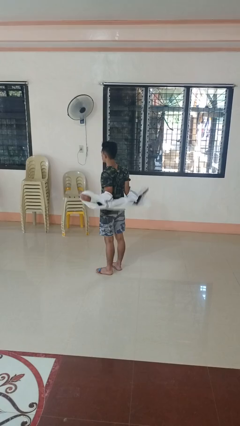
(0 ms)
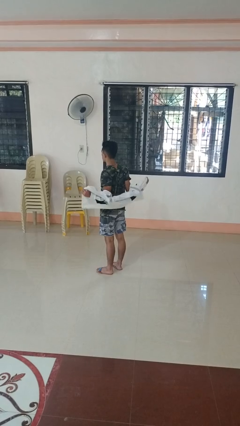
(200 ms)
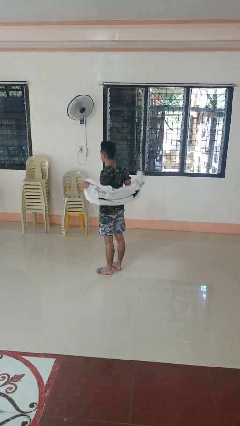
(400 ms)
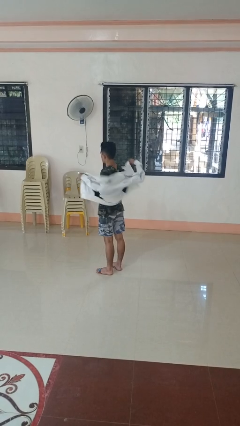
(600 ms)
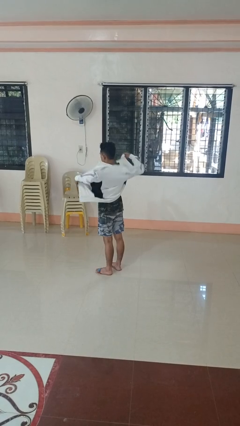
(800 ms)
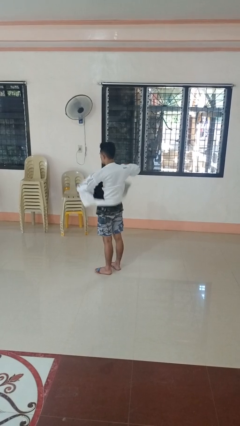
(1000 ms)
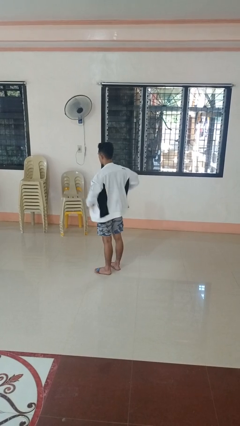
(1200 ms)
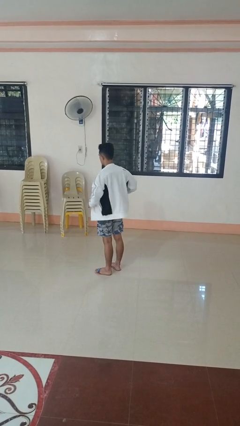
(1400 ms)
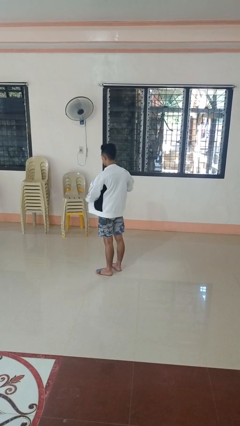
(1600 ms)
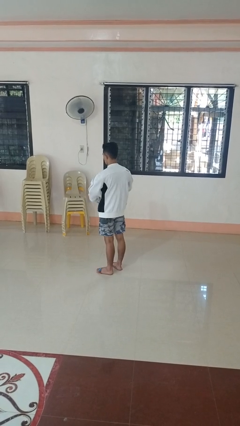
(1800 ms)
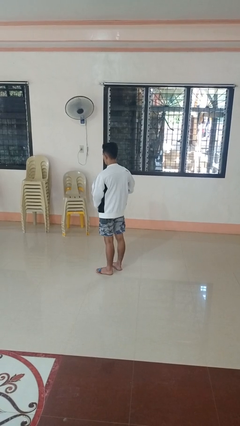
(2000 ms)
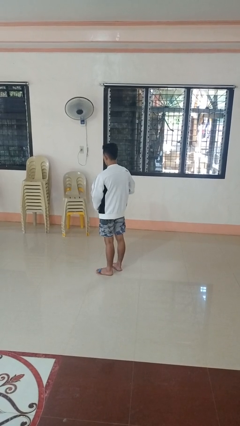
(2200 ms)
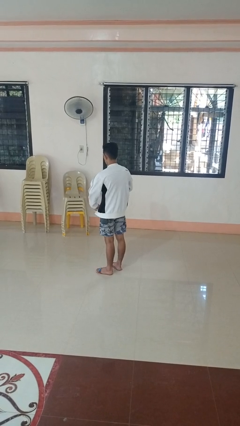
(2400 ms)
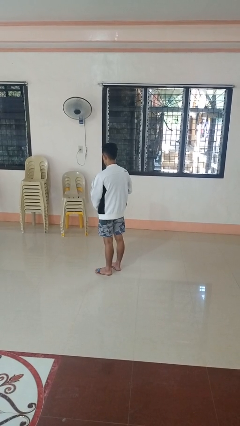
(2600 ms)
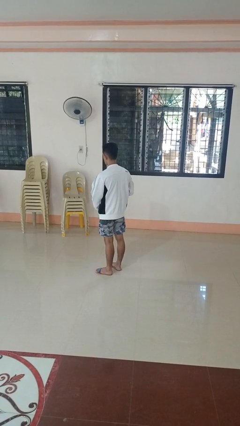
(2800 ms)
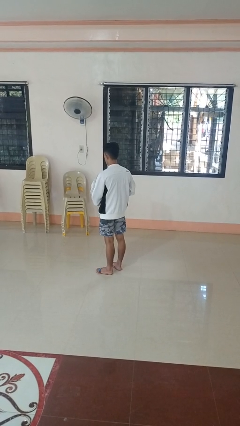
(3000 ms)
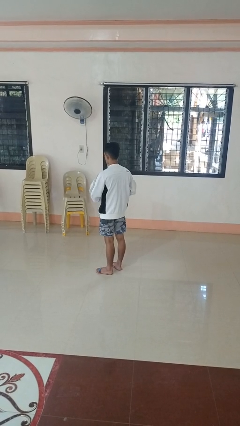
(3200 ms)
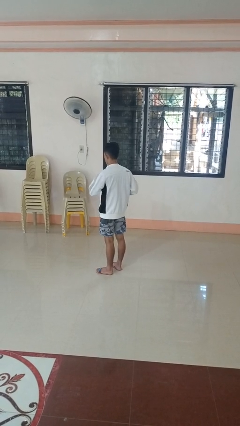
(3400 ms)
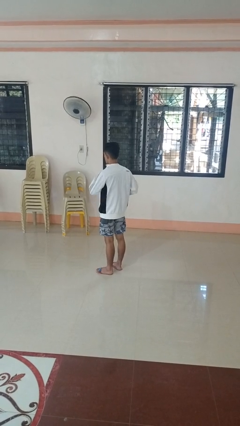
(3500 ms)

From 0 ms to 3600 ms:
person puts on jacket

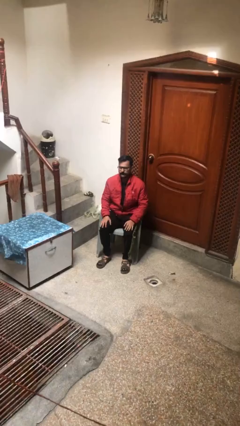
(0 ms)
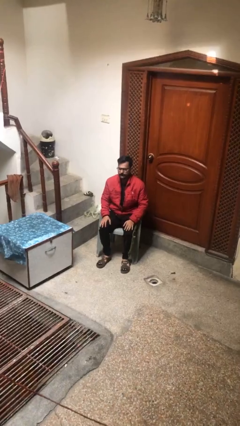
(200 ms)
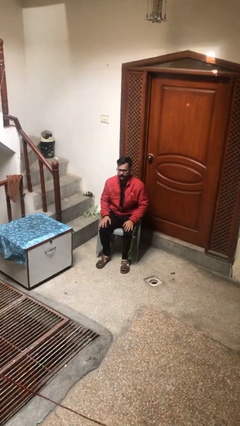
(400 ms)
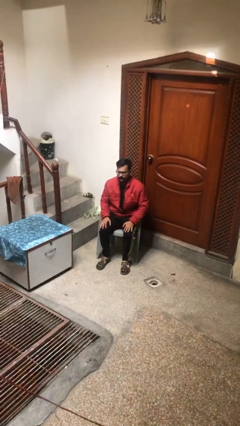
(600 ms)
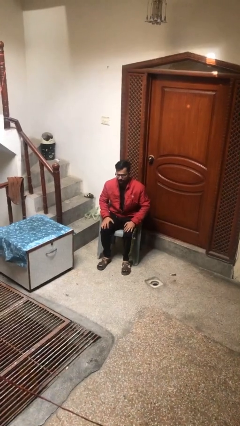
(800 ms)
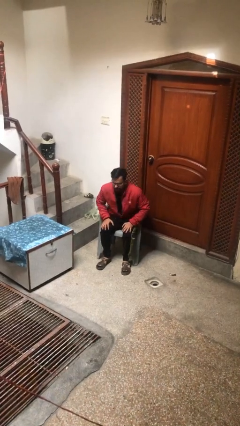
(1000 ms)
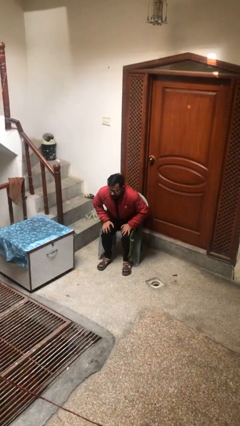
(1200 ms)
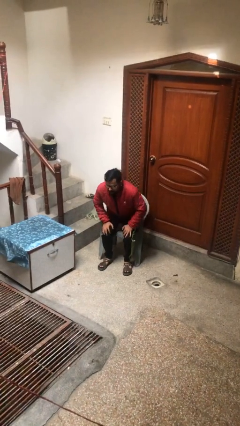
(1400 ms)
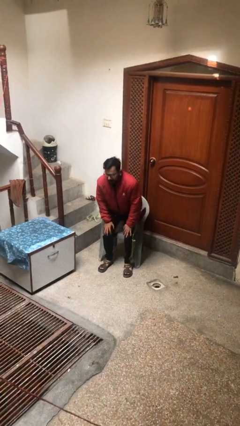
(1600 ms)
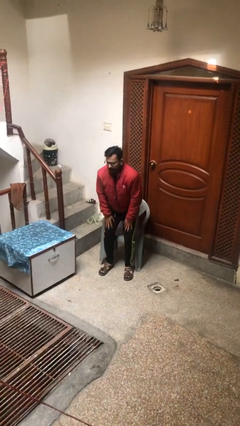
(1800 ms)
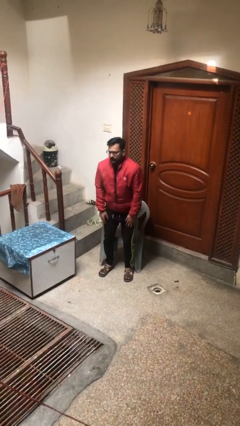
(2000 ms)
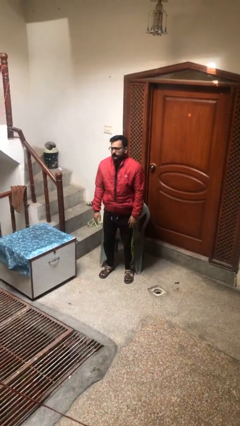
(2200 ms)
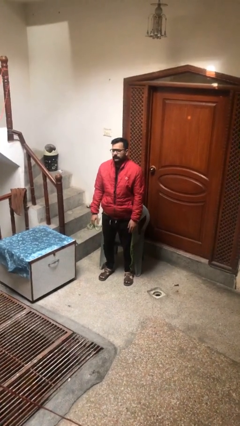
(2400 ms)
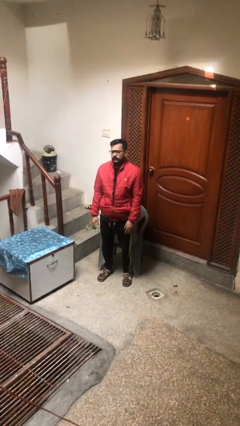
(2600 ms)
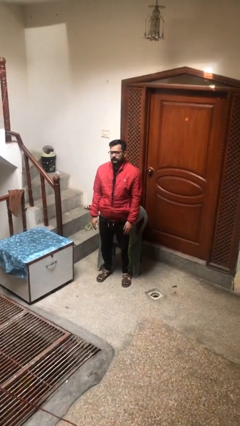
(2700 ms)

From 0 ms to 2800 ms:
person stands up

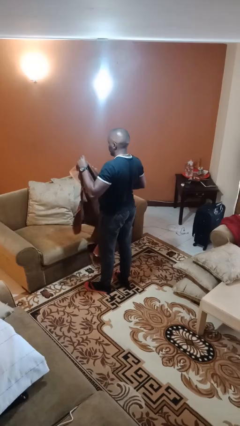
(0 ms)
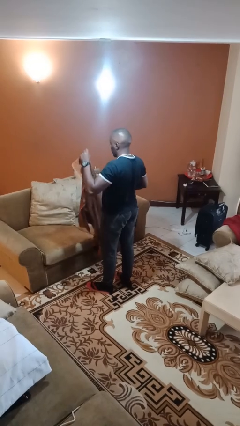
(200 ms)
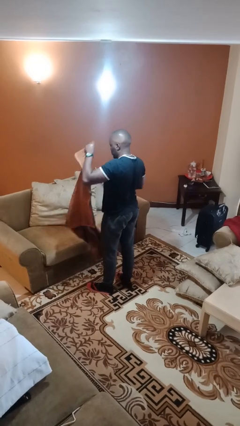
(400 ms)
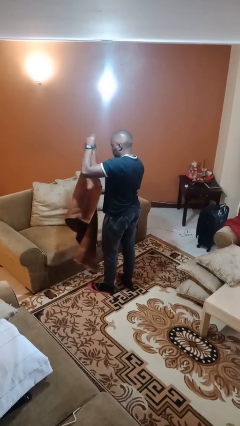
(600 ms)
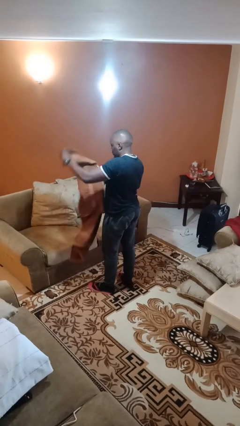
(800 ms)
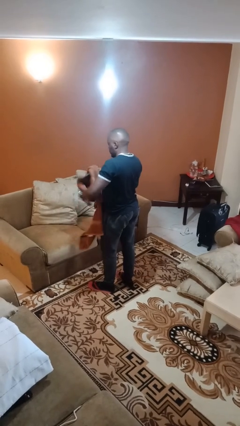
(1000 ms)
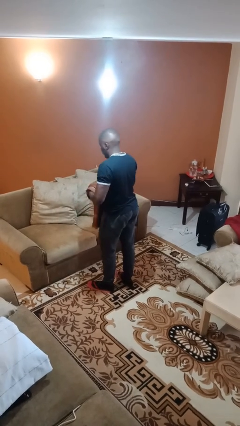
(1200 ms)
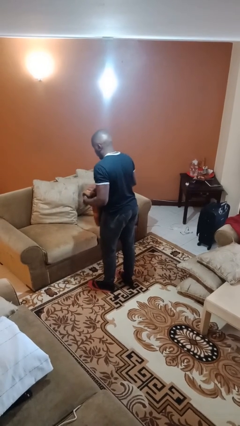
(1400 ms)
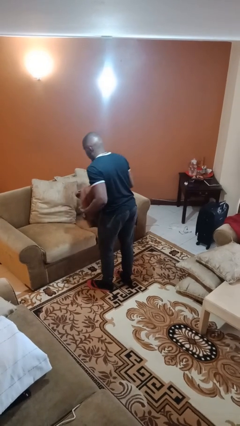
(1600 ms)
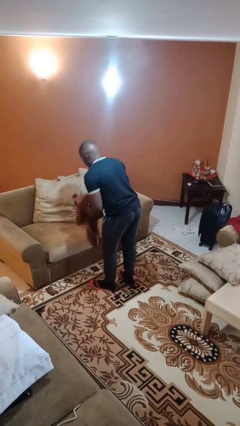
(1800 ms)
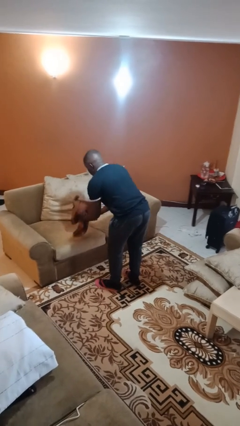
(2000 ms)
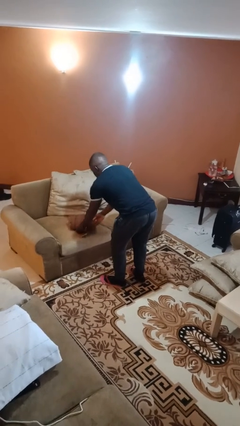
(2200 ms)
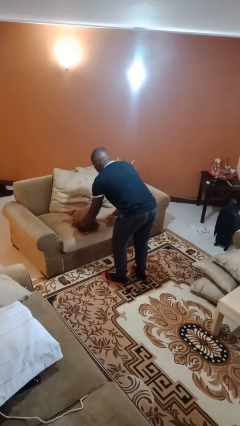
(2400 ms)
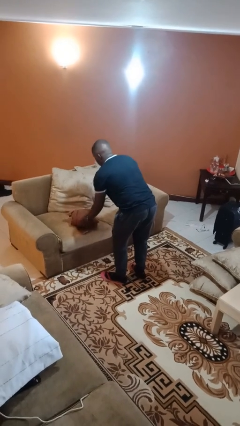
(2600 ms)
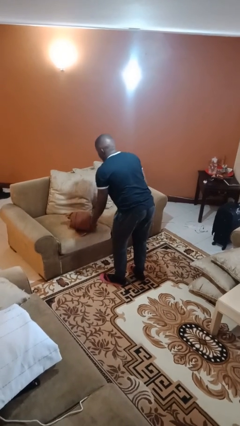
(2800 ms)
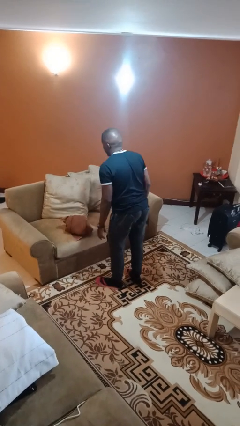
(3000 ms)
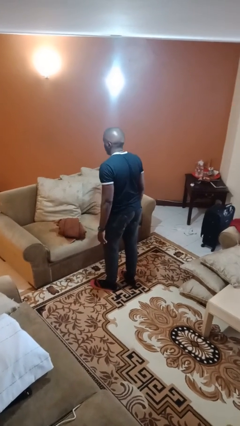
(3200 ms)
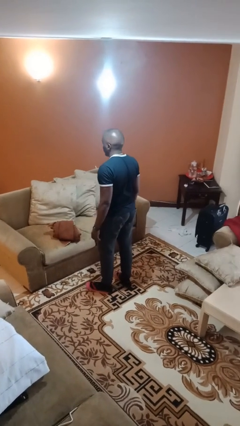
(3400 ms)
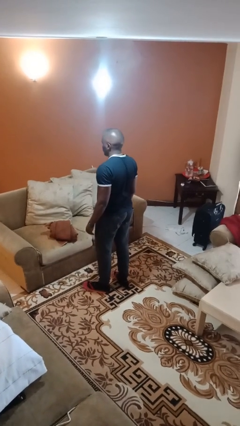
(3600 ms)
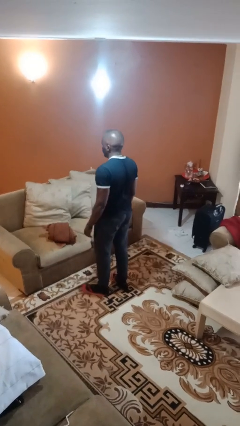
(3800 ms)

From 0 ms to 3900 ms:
person folds towel

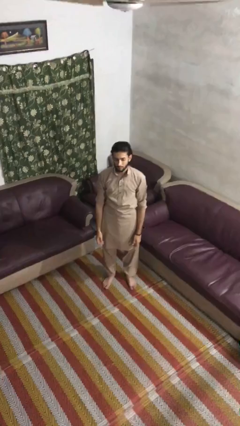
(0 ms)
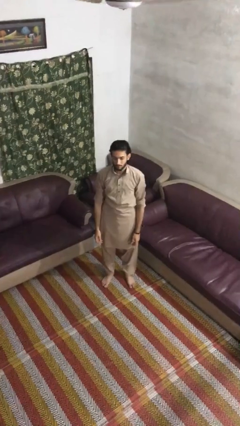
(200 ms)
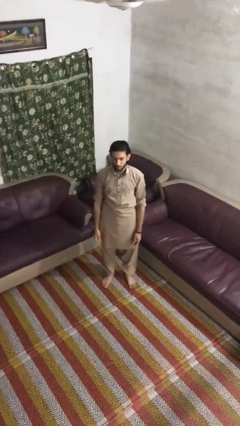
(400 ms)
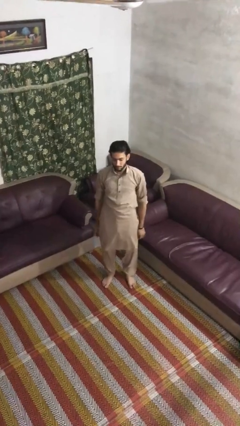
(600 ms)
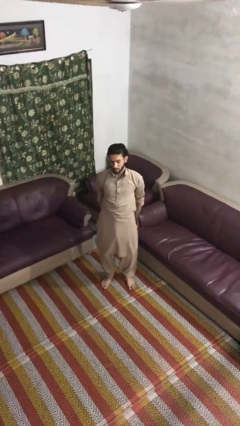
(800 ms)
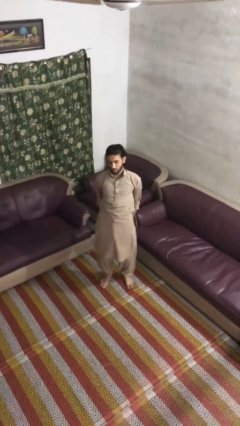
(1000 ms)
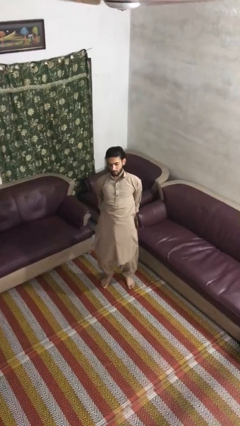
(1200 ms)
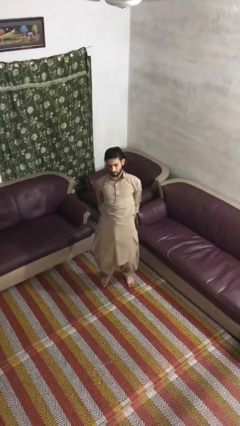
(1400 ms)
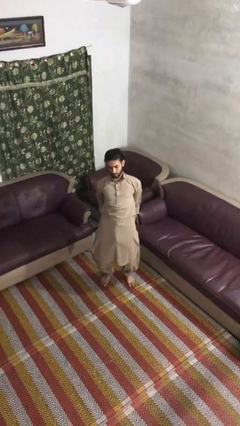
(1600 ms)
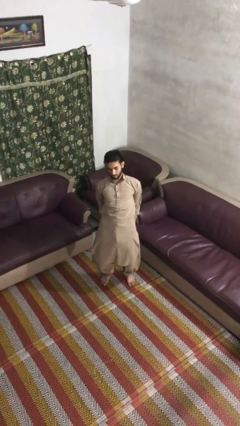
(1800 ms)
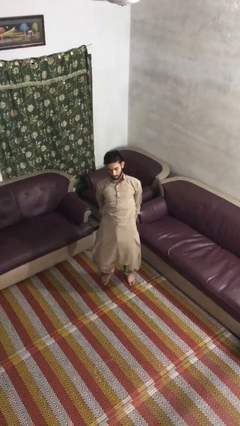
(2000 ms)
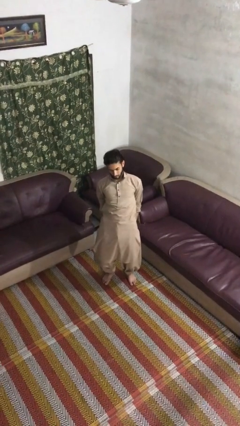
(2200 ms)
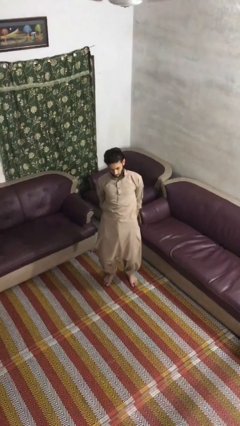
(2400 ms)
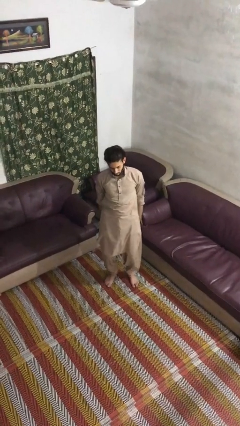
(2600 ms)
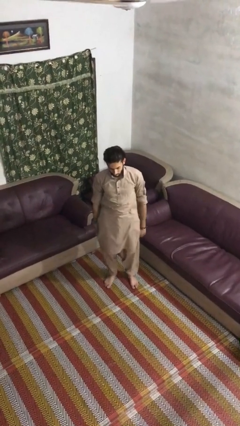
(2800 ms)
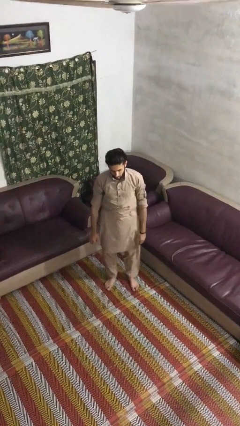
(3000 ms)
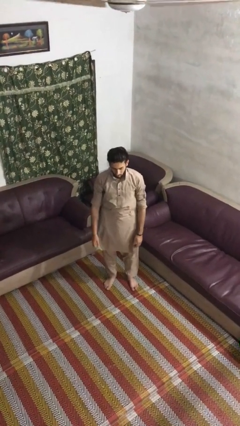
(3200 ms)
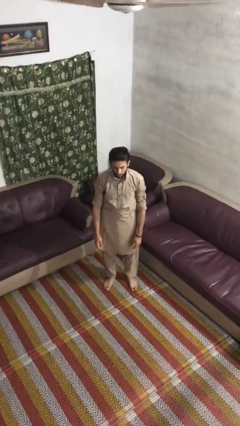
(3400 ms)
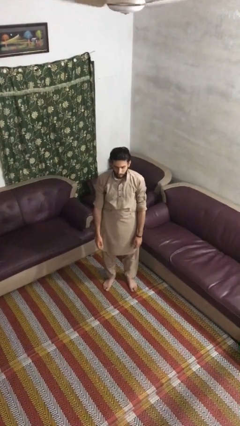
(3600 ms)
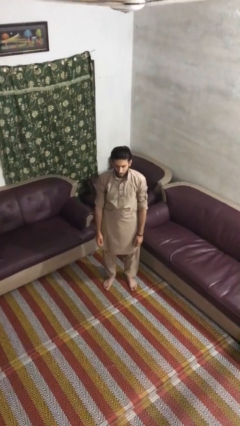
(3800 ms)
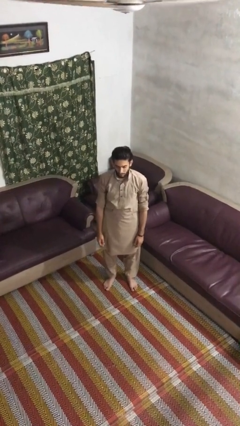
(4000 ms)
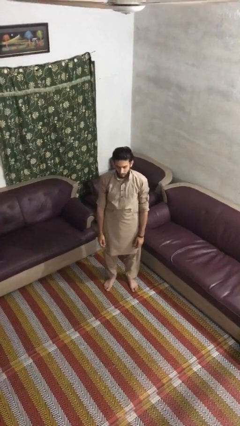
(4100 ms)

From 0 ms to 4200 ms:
person stretches back

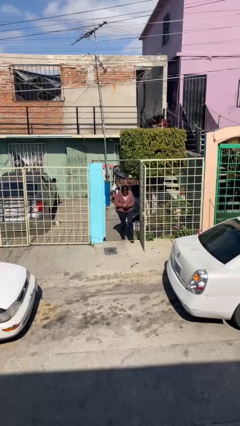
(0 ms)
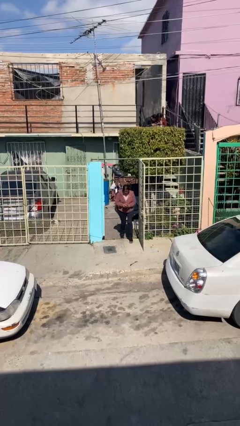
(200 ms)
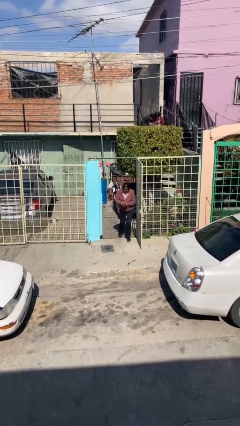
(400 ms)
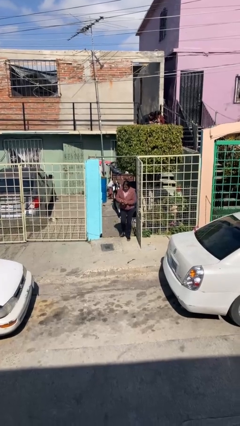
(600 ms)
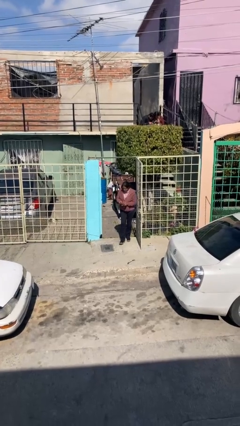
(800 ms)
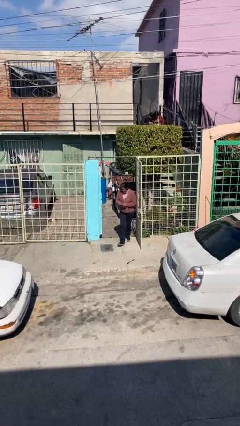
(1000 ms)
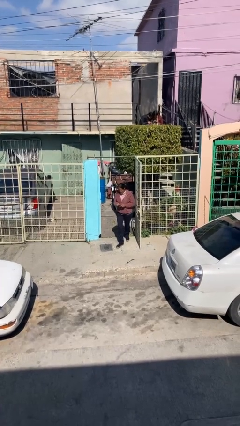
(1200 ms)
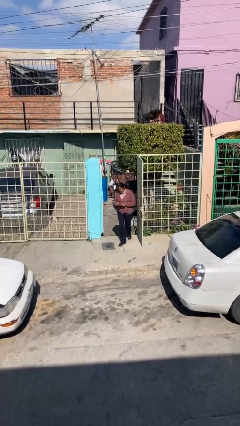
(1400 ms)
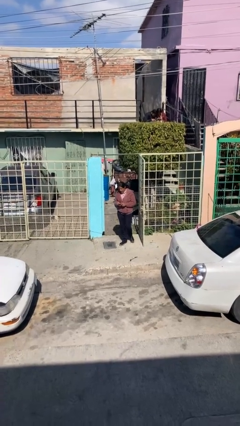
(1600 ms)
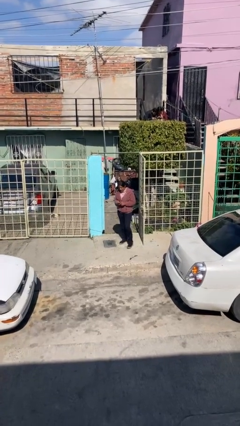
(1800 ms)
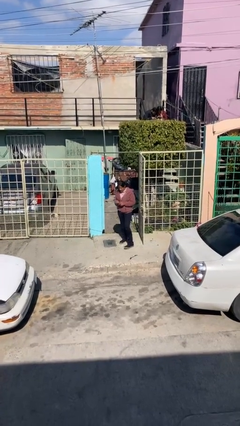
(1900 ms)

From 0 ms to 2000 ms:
person enters scene through structure

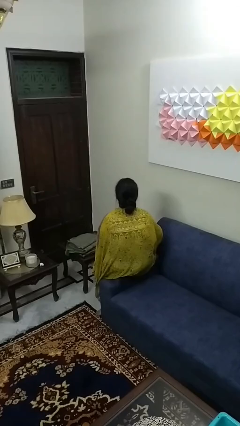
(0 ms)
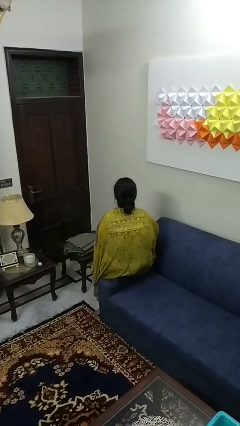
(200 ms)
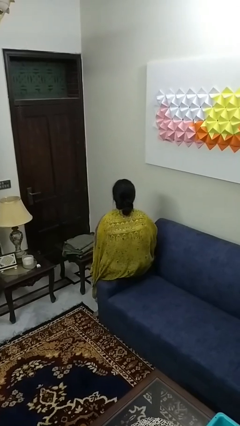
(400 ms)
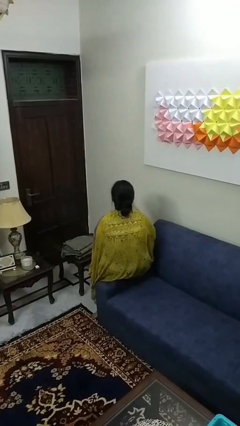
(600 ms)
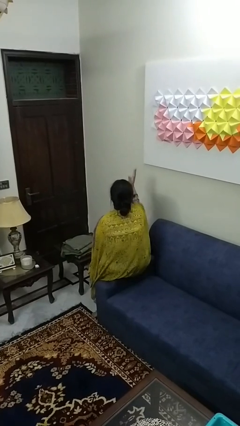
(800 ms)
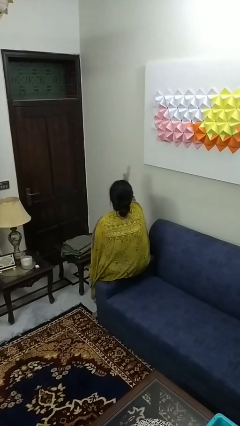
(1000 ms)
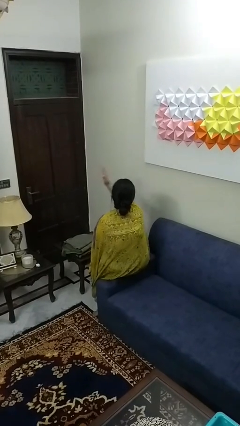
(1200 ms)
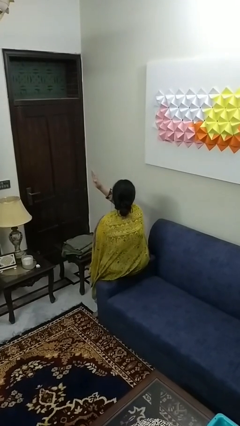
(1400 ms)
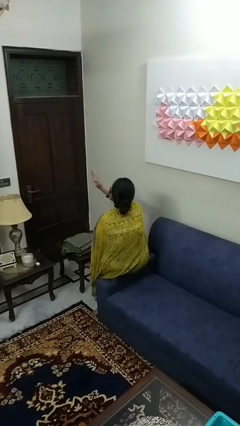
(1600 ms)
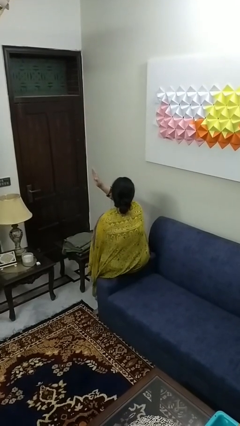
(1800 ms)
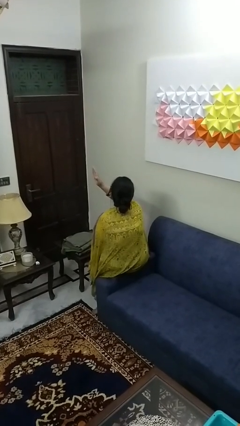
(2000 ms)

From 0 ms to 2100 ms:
person gestures swipe left
